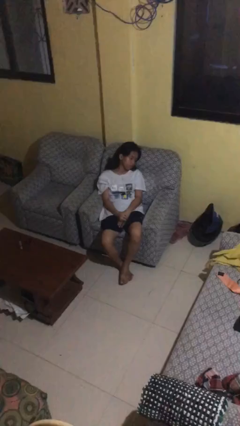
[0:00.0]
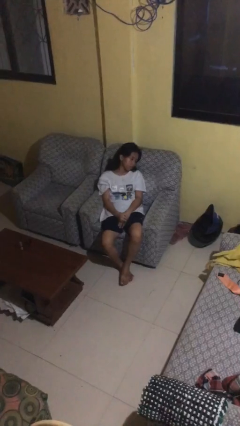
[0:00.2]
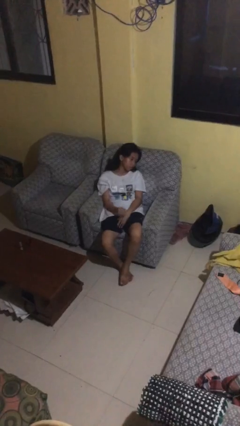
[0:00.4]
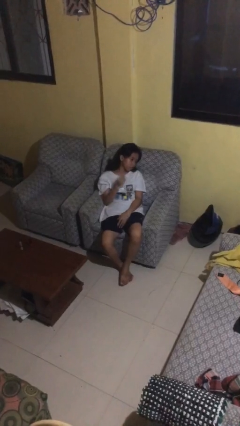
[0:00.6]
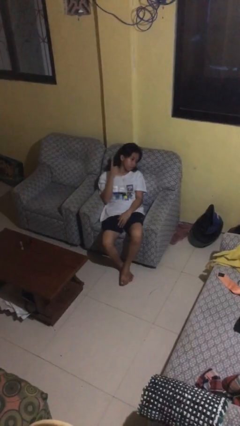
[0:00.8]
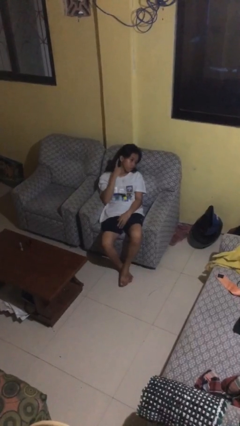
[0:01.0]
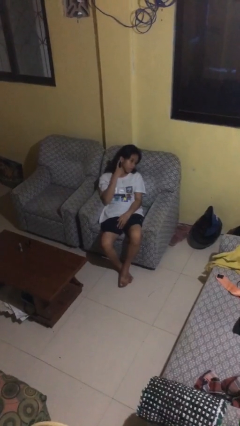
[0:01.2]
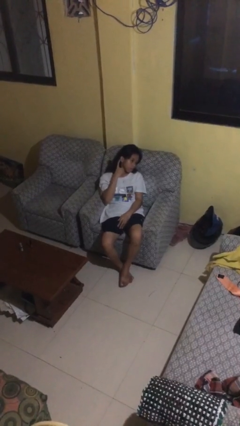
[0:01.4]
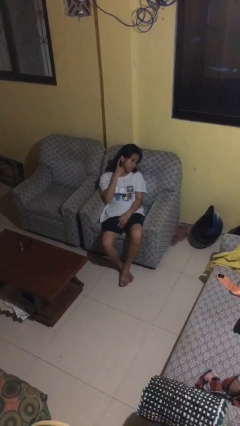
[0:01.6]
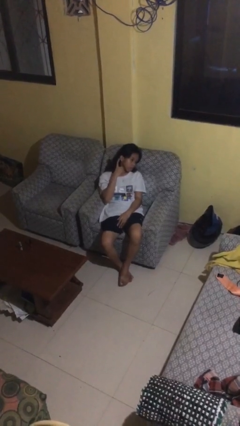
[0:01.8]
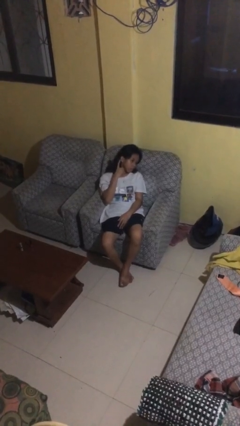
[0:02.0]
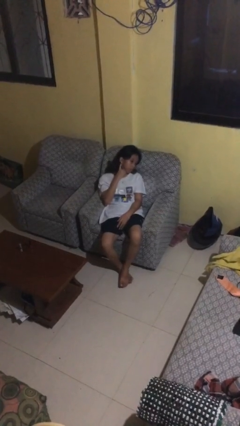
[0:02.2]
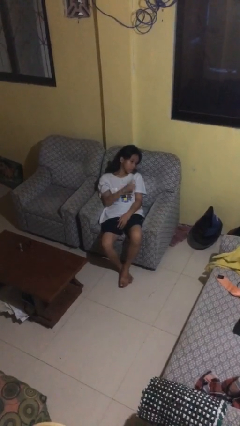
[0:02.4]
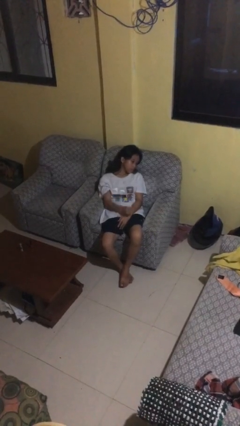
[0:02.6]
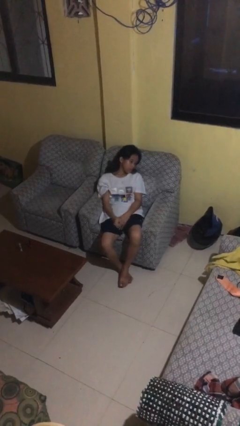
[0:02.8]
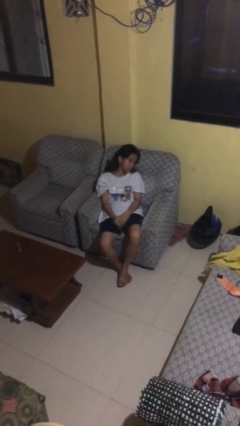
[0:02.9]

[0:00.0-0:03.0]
person gestures listen closely

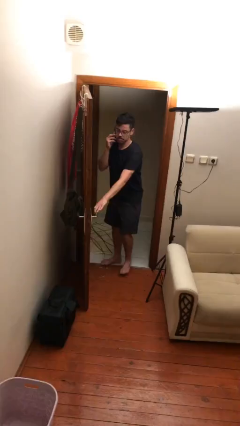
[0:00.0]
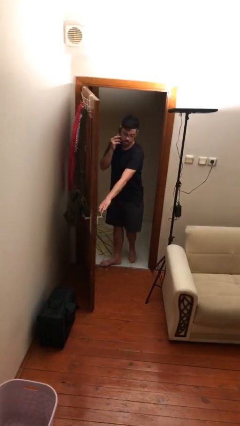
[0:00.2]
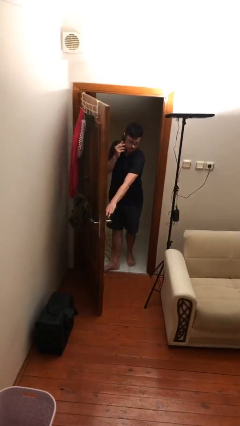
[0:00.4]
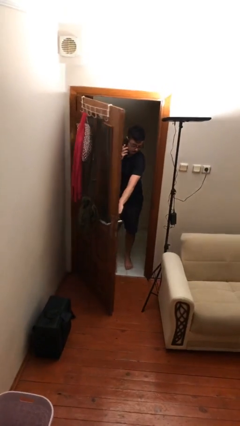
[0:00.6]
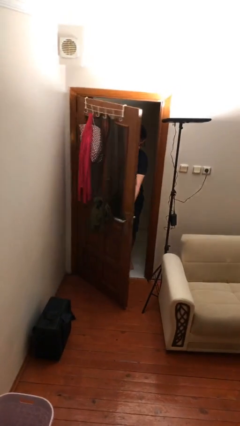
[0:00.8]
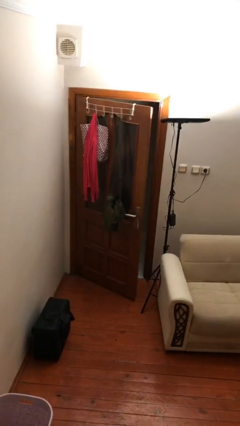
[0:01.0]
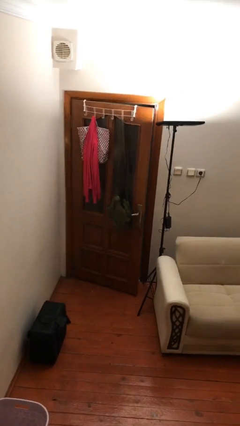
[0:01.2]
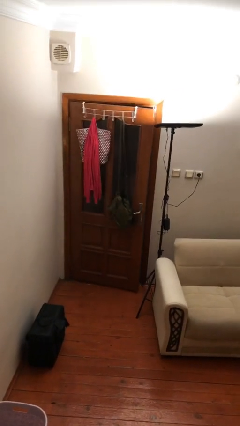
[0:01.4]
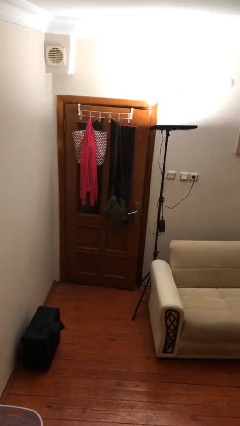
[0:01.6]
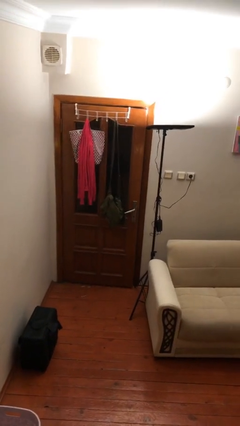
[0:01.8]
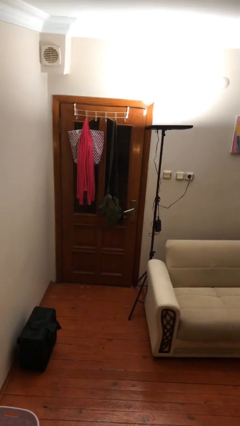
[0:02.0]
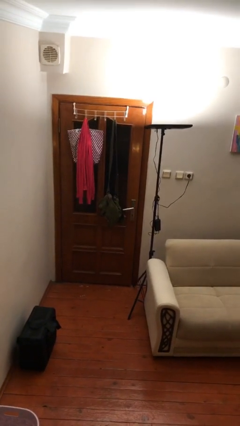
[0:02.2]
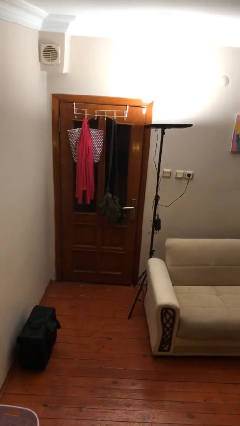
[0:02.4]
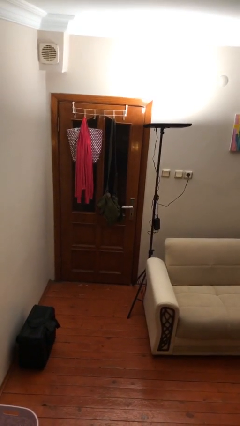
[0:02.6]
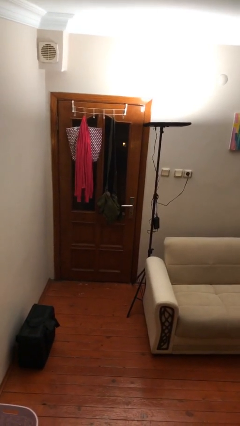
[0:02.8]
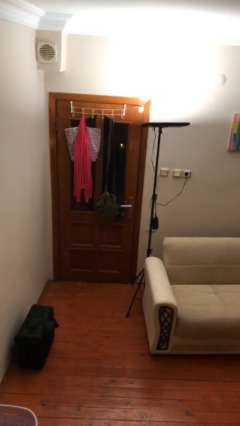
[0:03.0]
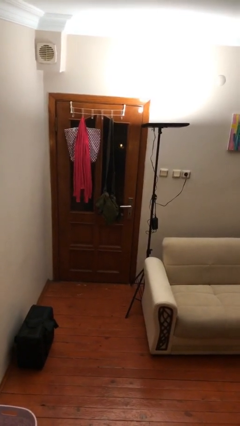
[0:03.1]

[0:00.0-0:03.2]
person closes facility door

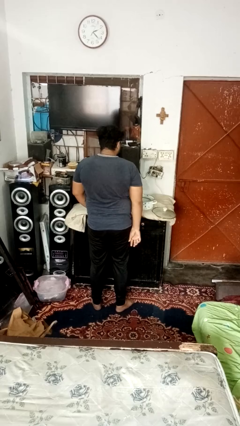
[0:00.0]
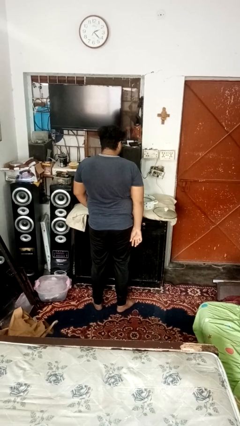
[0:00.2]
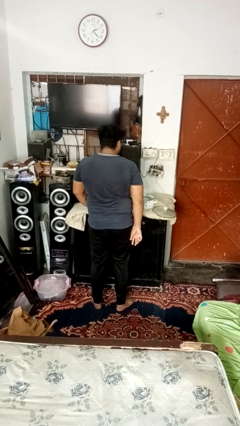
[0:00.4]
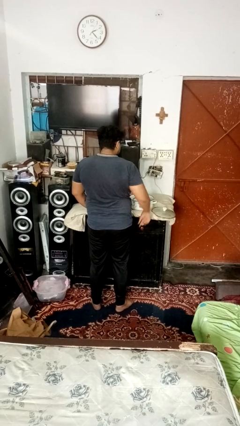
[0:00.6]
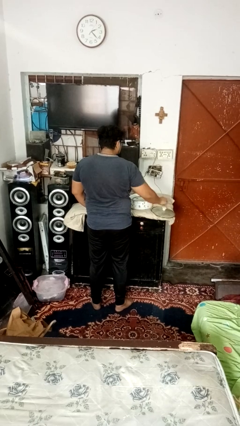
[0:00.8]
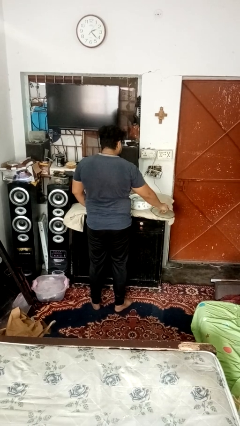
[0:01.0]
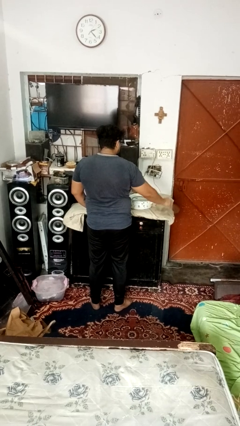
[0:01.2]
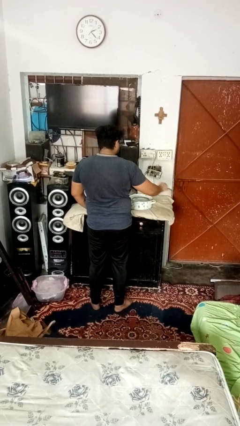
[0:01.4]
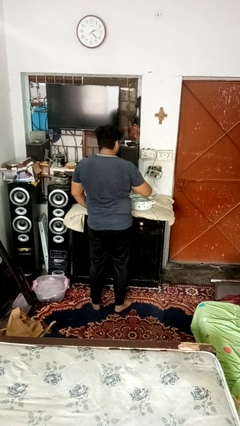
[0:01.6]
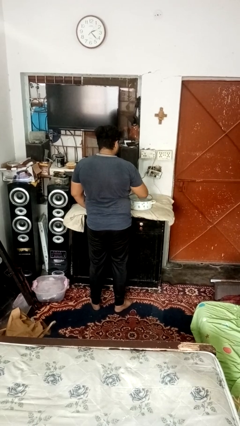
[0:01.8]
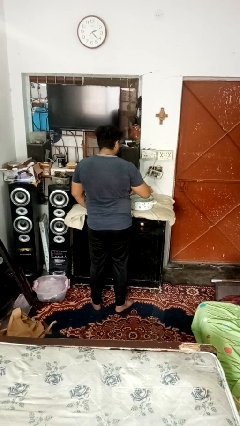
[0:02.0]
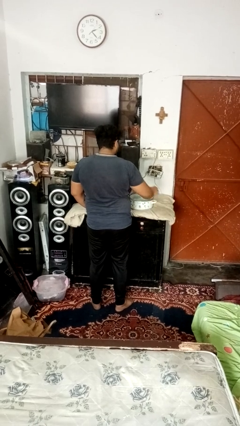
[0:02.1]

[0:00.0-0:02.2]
person closes jar

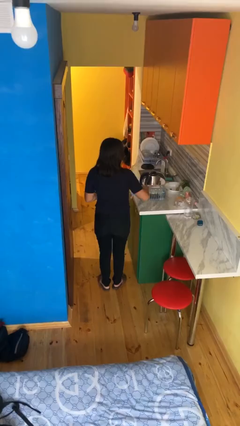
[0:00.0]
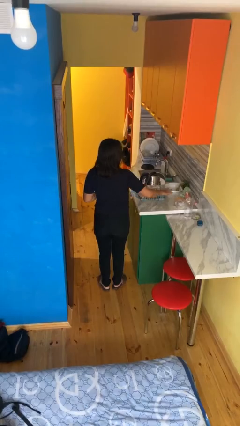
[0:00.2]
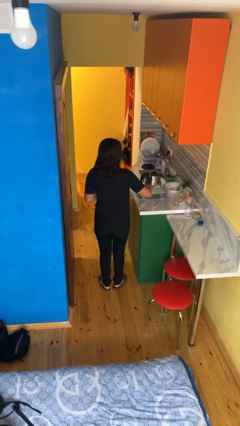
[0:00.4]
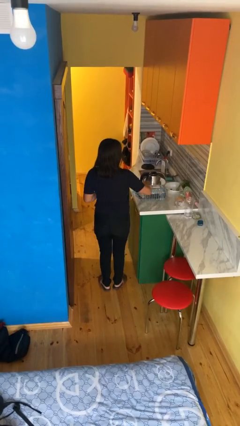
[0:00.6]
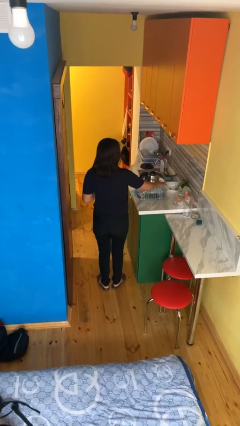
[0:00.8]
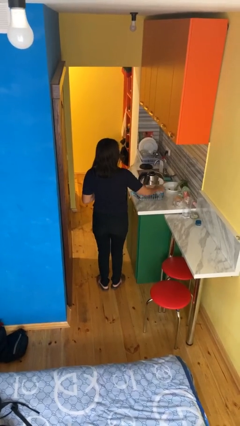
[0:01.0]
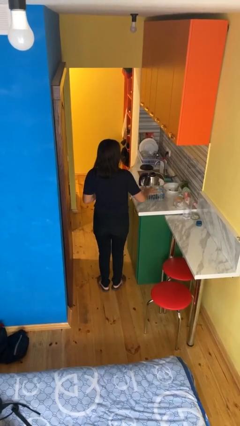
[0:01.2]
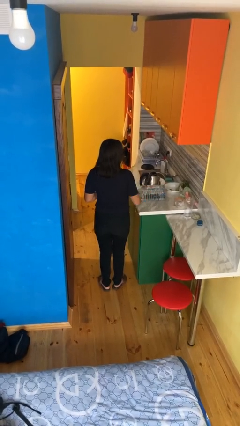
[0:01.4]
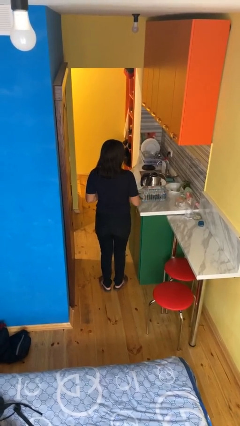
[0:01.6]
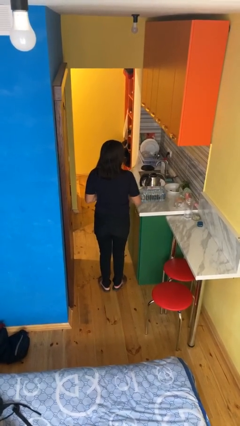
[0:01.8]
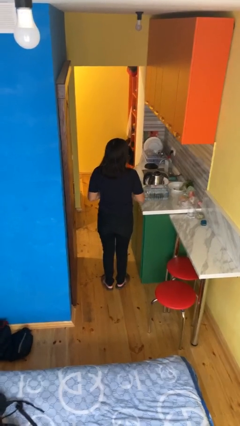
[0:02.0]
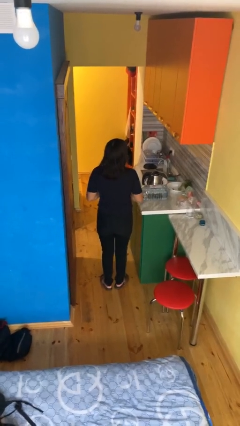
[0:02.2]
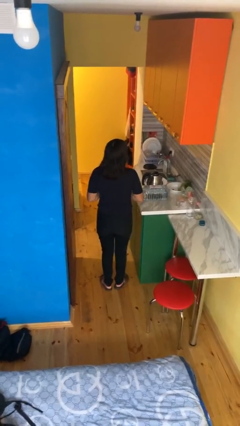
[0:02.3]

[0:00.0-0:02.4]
person waves hand over object

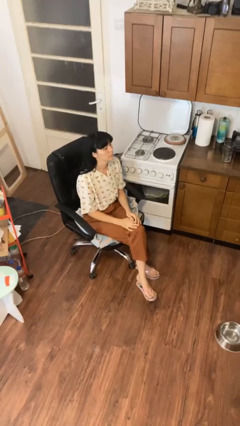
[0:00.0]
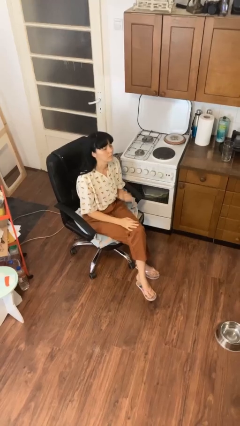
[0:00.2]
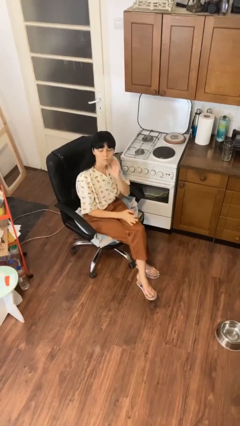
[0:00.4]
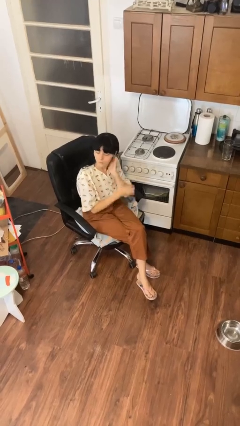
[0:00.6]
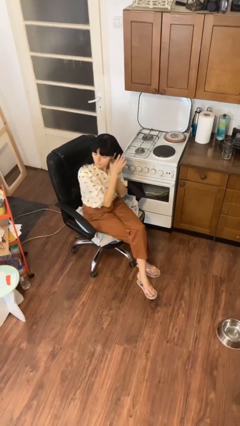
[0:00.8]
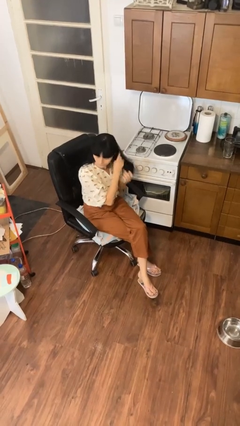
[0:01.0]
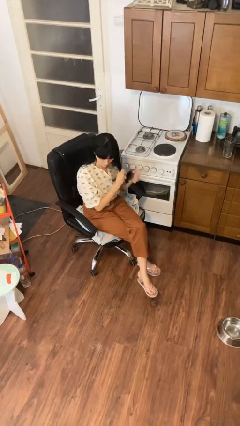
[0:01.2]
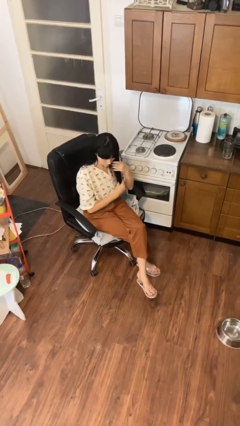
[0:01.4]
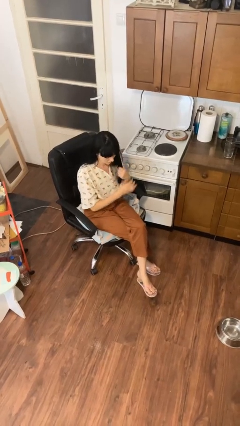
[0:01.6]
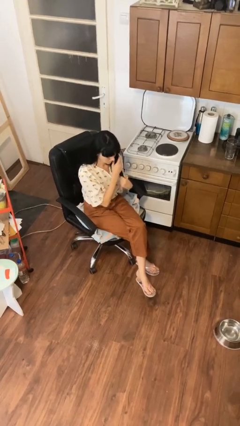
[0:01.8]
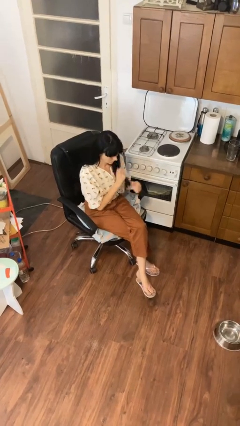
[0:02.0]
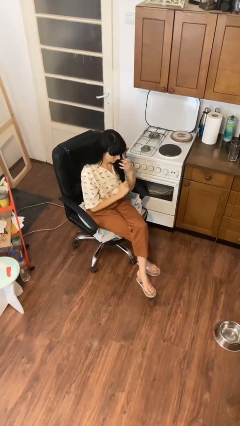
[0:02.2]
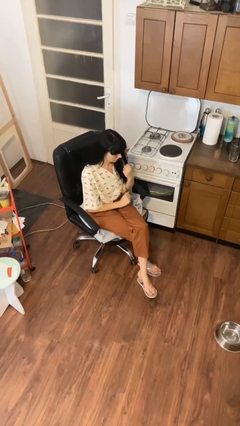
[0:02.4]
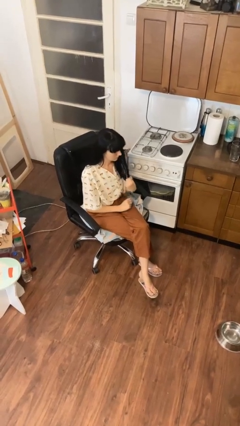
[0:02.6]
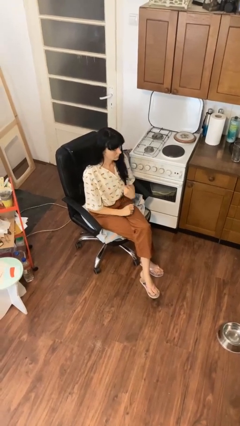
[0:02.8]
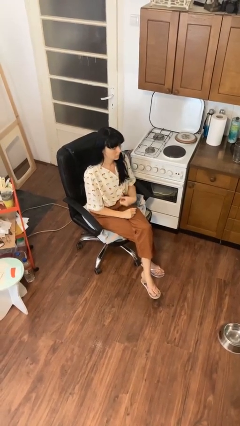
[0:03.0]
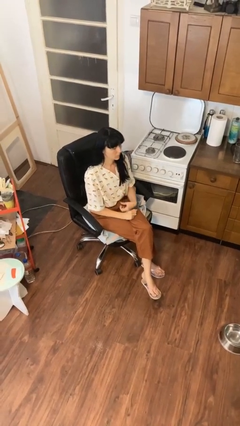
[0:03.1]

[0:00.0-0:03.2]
person strokes hair

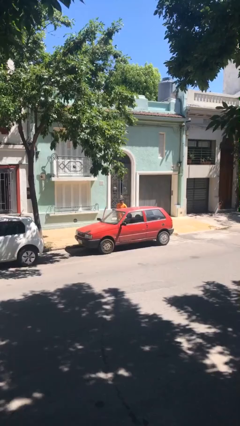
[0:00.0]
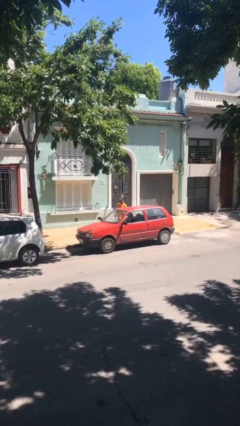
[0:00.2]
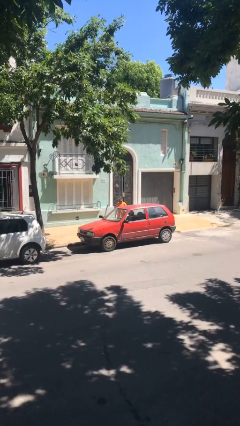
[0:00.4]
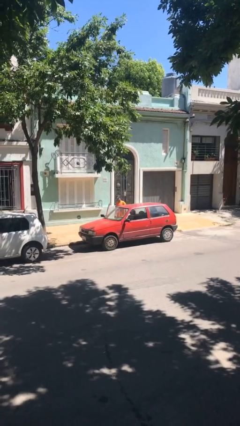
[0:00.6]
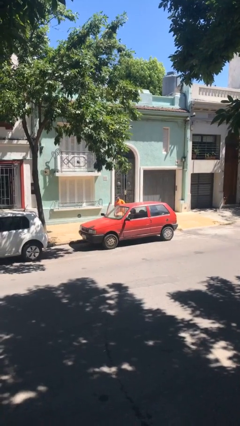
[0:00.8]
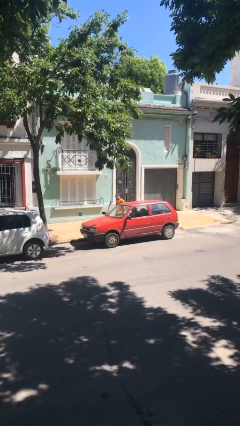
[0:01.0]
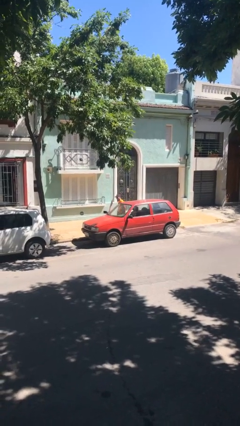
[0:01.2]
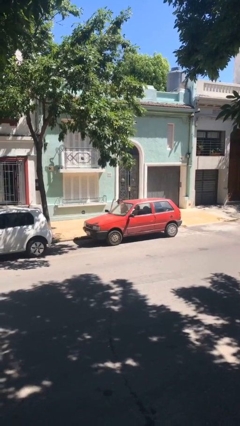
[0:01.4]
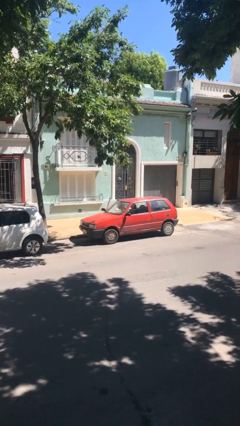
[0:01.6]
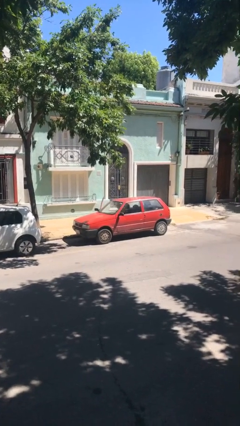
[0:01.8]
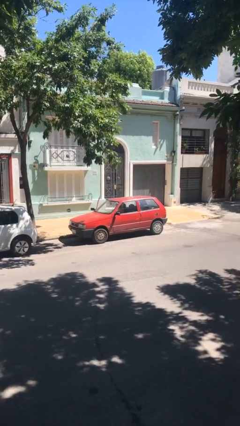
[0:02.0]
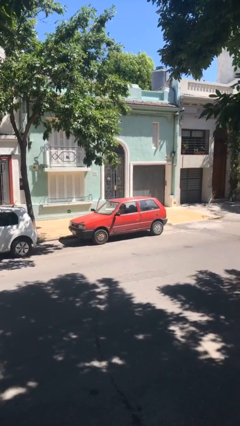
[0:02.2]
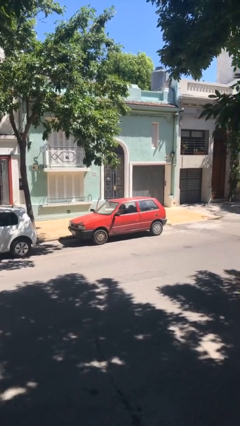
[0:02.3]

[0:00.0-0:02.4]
person enters car

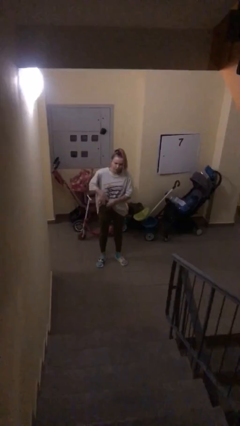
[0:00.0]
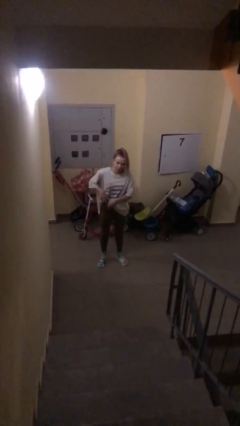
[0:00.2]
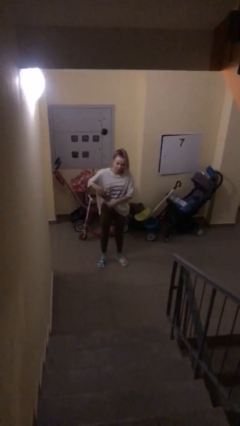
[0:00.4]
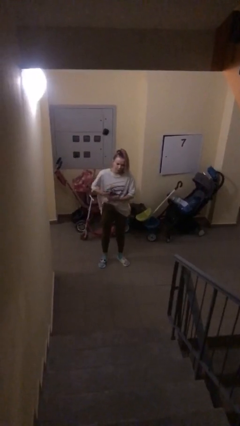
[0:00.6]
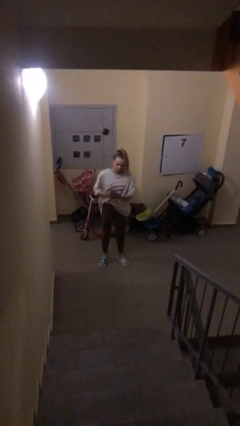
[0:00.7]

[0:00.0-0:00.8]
person takes phone from pocket
